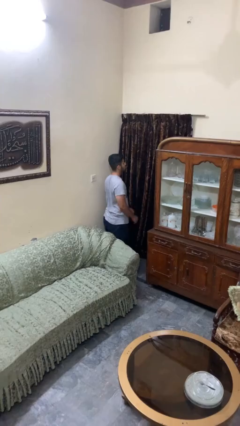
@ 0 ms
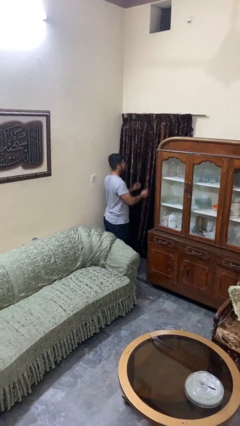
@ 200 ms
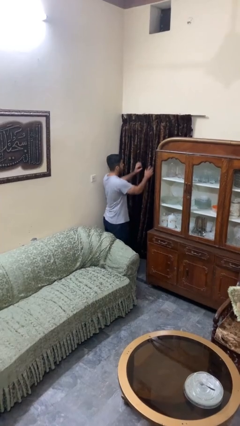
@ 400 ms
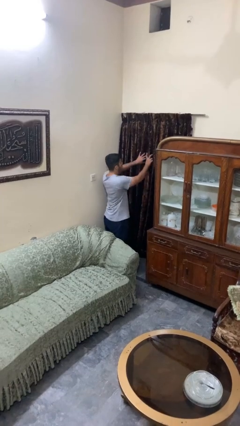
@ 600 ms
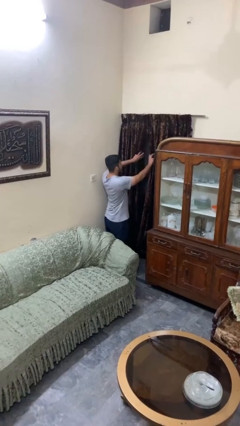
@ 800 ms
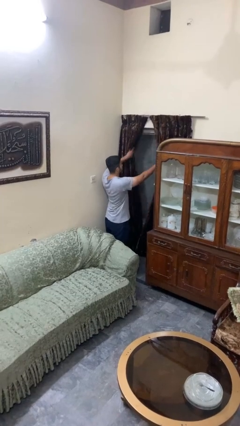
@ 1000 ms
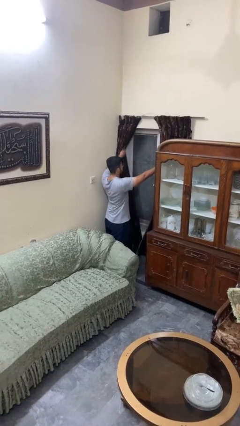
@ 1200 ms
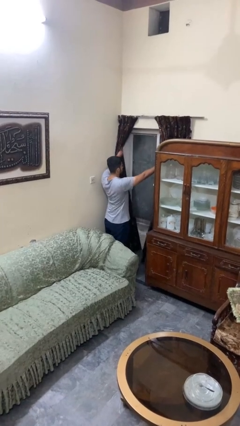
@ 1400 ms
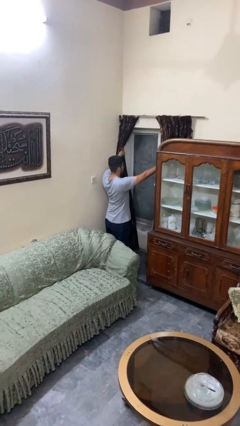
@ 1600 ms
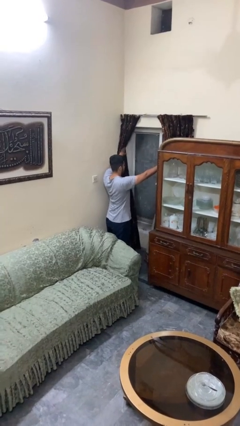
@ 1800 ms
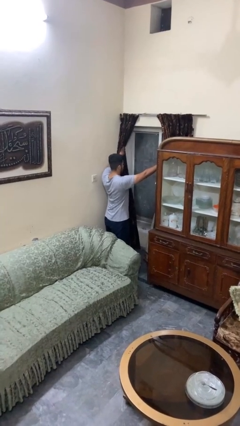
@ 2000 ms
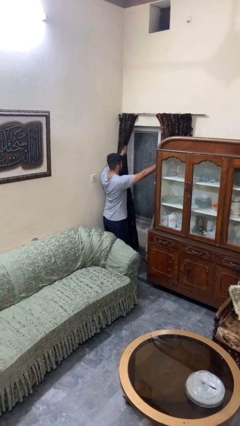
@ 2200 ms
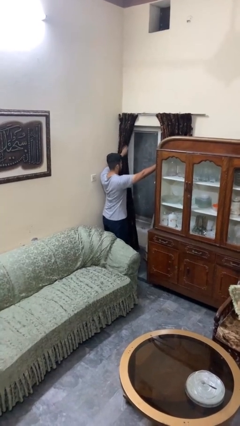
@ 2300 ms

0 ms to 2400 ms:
person opens curtains

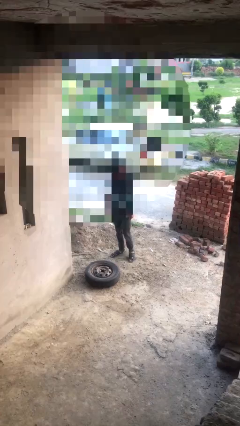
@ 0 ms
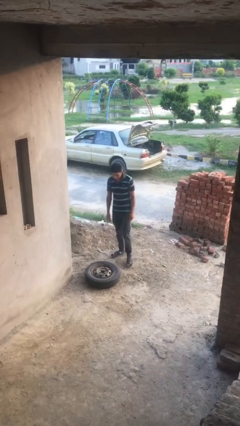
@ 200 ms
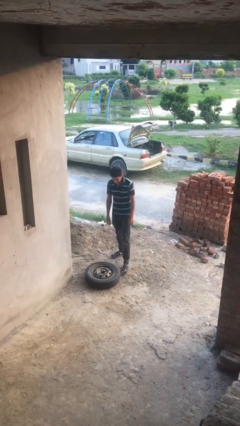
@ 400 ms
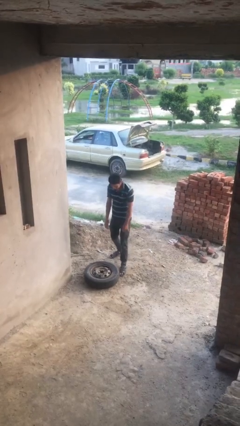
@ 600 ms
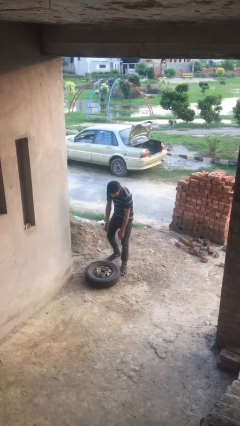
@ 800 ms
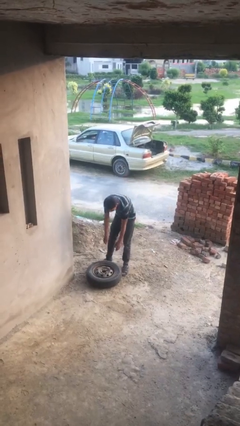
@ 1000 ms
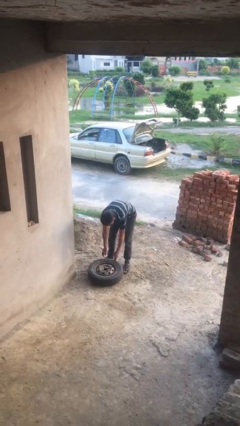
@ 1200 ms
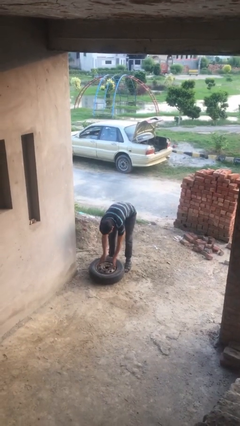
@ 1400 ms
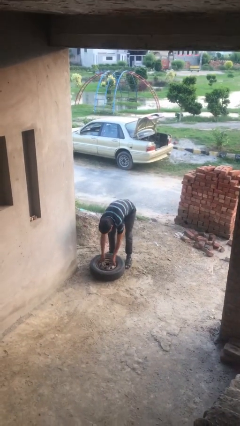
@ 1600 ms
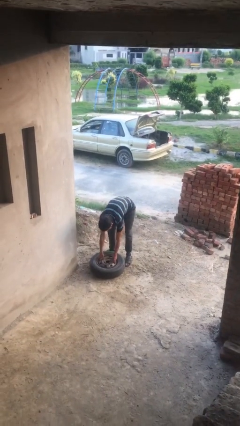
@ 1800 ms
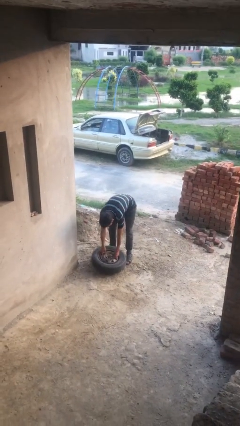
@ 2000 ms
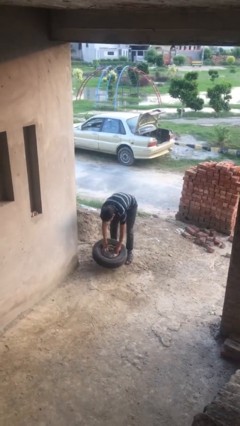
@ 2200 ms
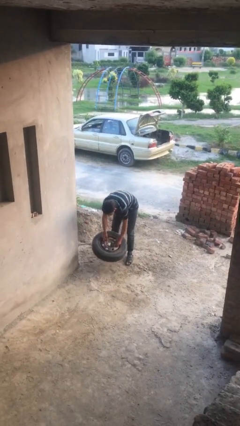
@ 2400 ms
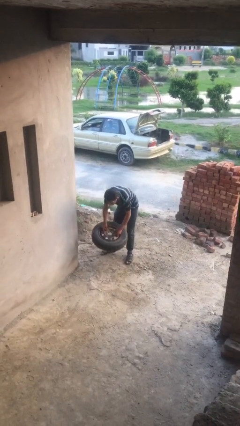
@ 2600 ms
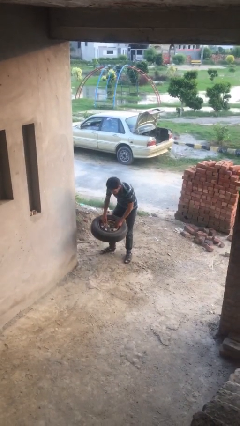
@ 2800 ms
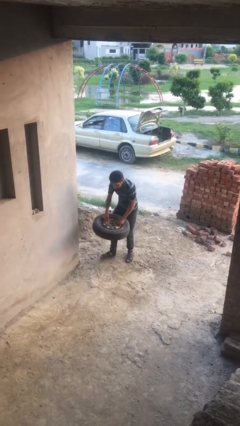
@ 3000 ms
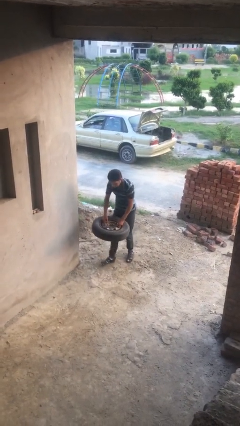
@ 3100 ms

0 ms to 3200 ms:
person picks up object from floor

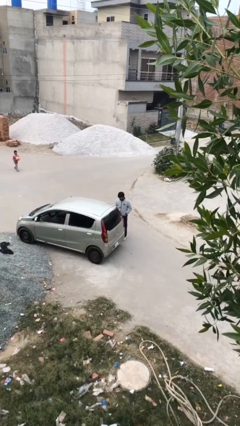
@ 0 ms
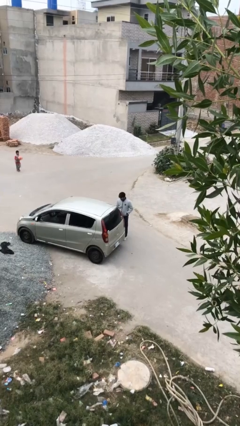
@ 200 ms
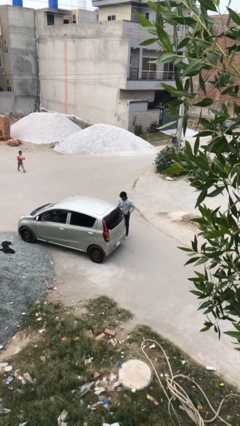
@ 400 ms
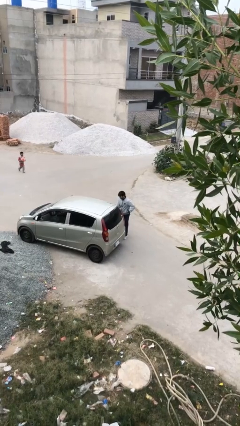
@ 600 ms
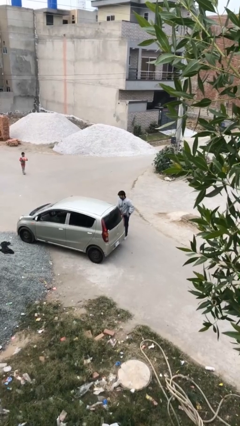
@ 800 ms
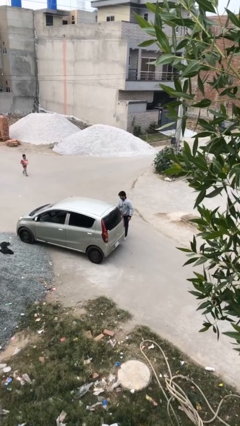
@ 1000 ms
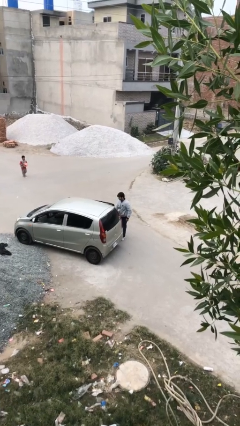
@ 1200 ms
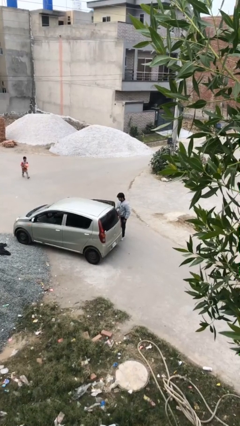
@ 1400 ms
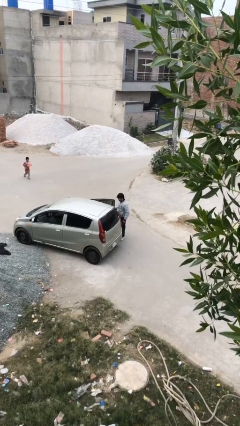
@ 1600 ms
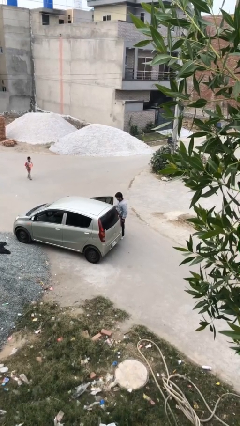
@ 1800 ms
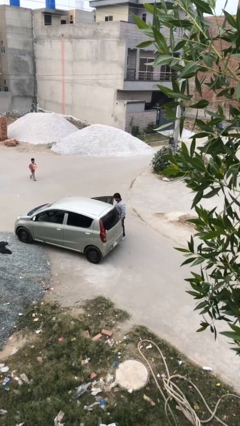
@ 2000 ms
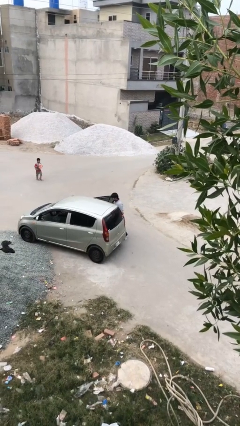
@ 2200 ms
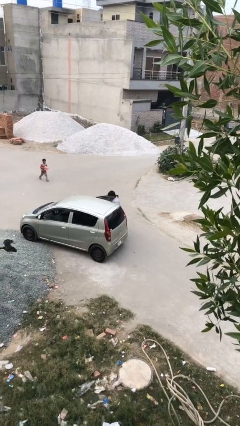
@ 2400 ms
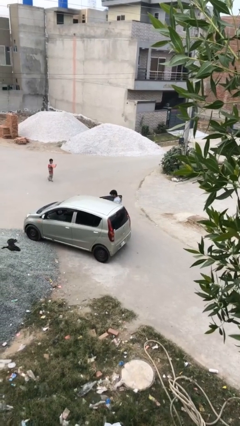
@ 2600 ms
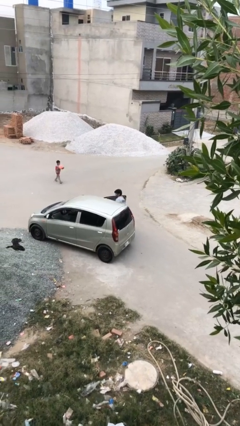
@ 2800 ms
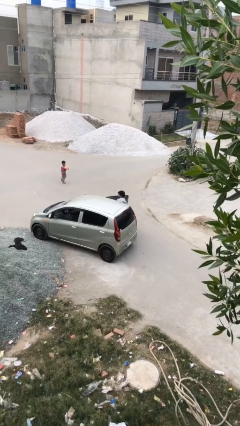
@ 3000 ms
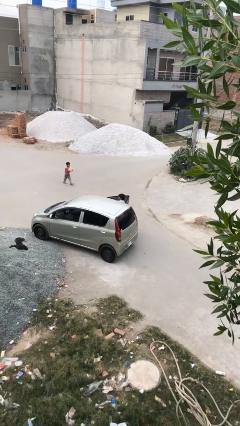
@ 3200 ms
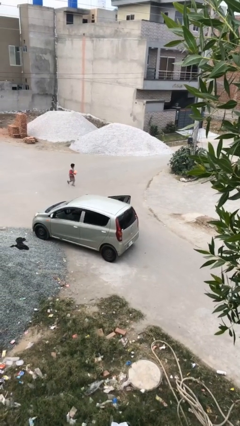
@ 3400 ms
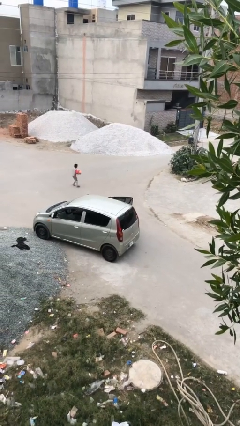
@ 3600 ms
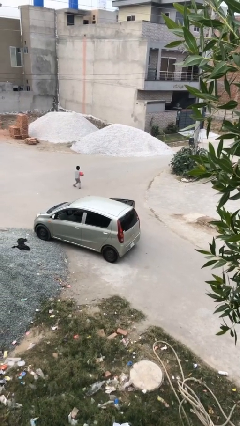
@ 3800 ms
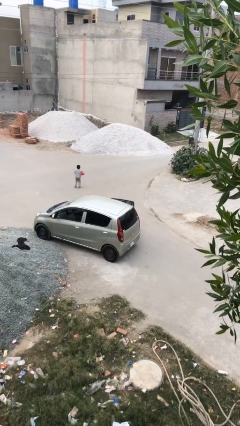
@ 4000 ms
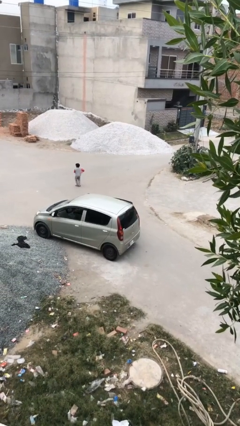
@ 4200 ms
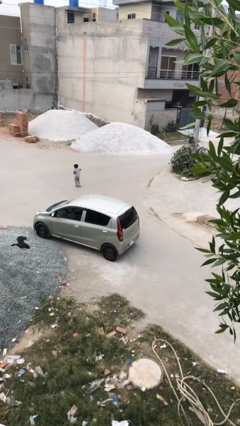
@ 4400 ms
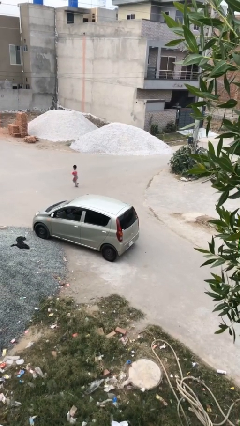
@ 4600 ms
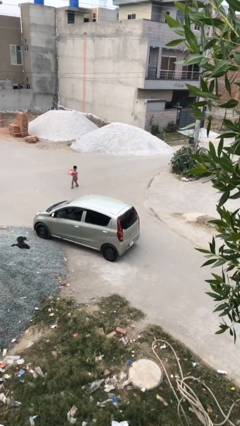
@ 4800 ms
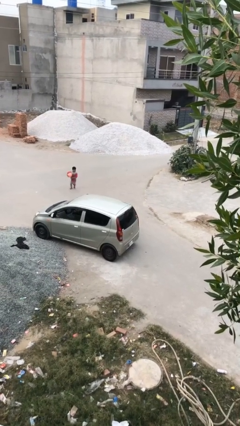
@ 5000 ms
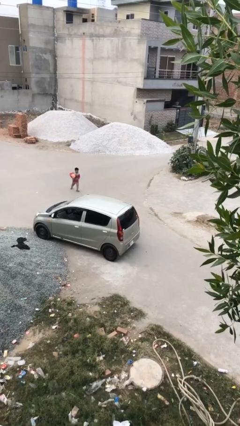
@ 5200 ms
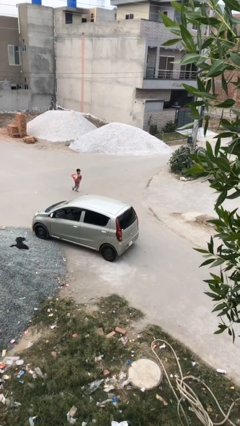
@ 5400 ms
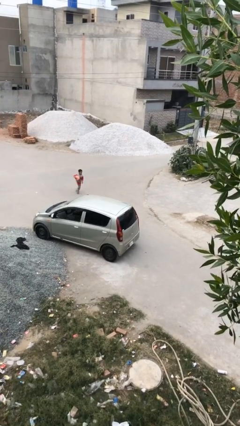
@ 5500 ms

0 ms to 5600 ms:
car picks up person

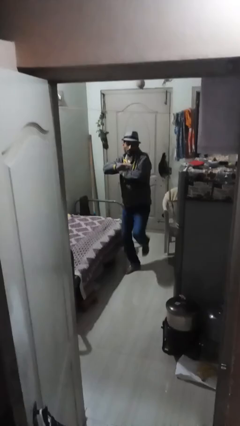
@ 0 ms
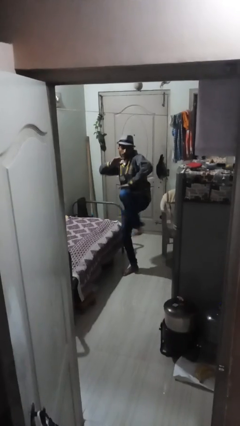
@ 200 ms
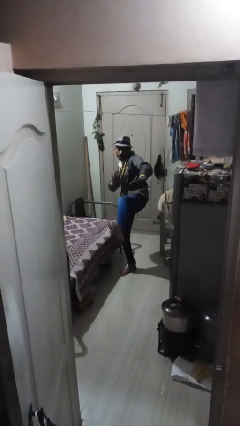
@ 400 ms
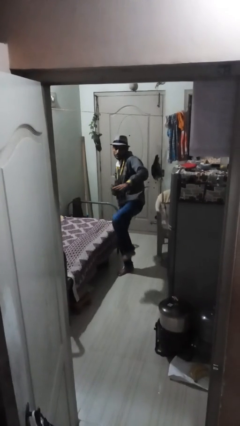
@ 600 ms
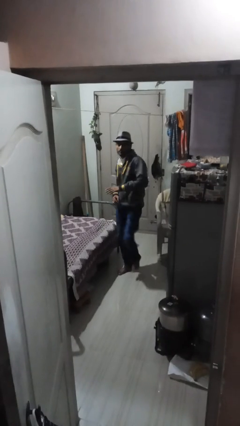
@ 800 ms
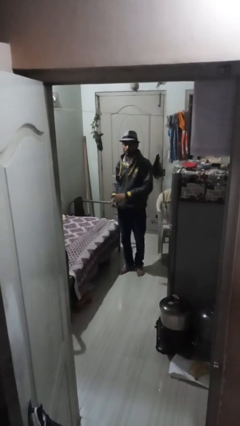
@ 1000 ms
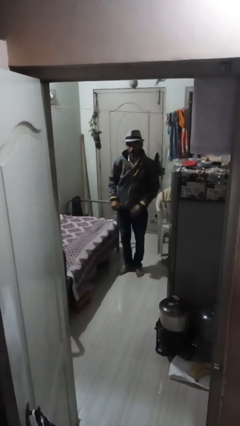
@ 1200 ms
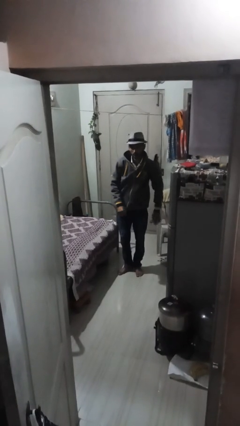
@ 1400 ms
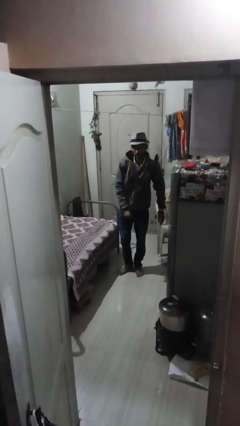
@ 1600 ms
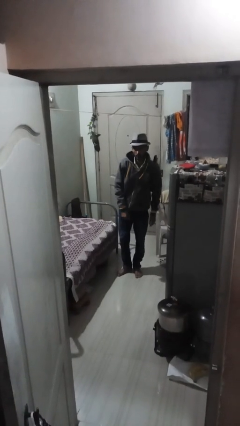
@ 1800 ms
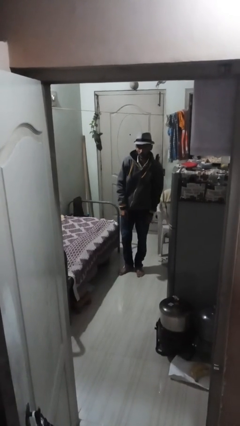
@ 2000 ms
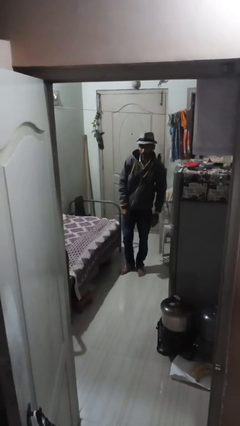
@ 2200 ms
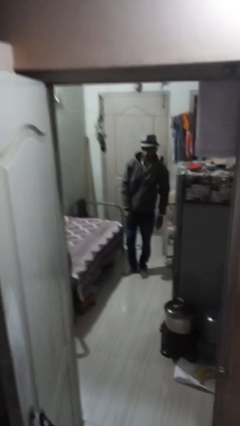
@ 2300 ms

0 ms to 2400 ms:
person karate kicks

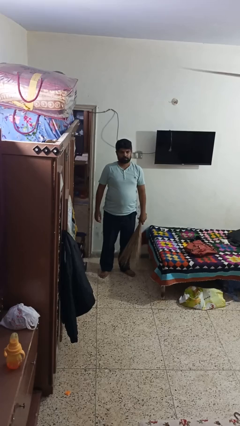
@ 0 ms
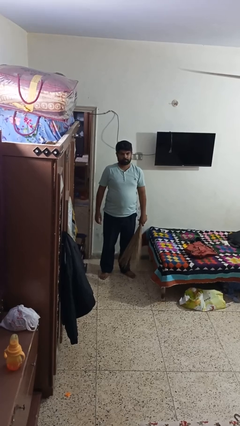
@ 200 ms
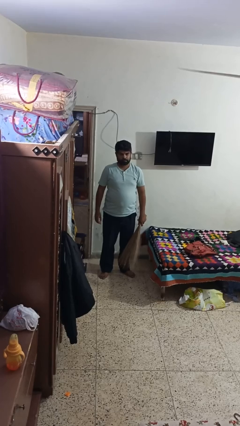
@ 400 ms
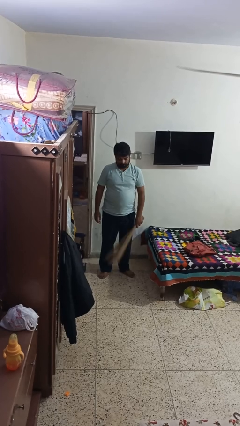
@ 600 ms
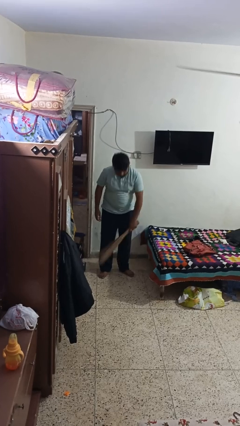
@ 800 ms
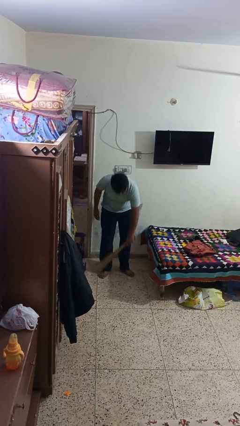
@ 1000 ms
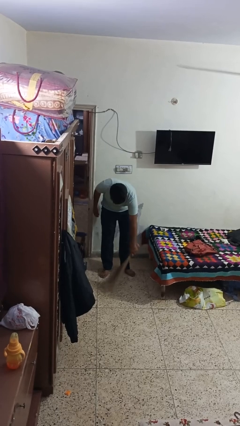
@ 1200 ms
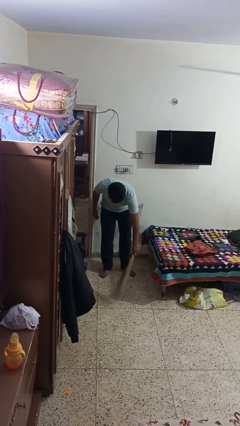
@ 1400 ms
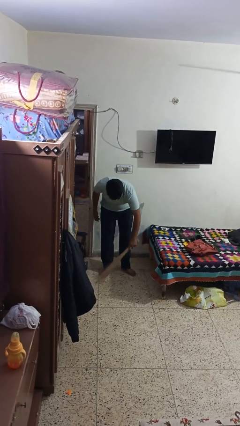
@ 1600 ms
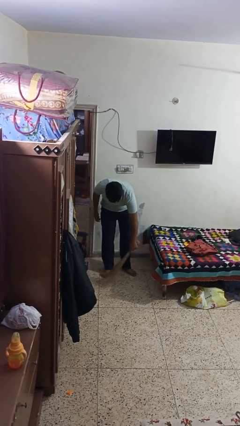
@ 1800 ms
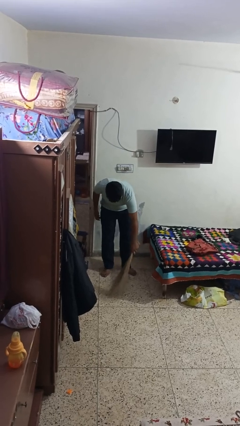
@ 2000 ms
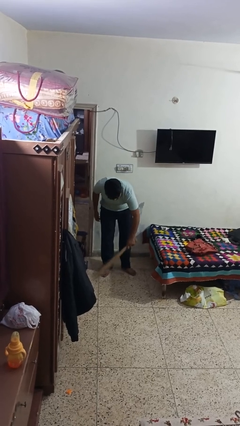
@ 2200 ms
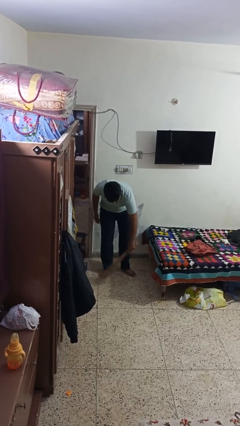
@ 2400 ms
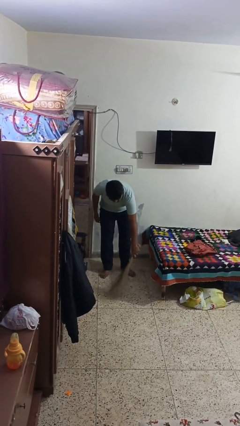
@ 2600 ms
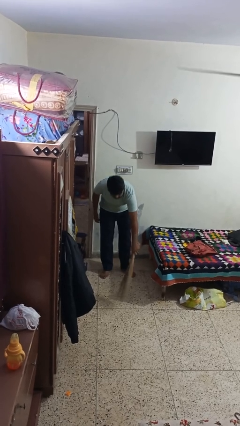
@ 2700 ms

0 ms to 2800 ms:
person sweeps floor

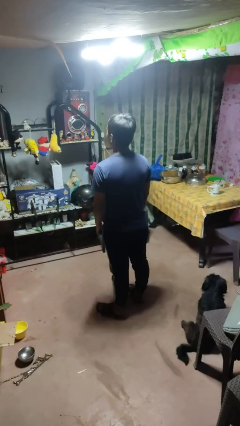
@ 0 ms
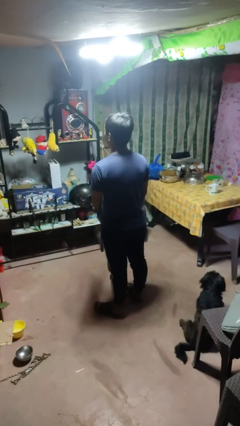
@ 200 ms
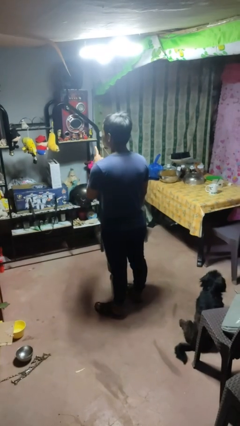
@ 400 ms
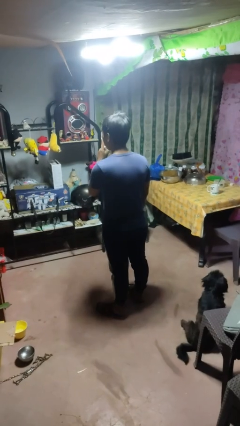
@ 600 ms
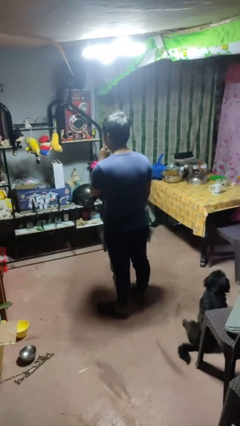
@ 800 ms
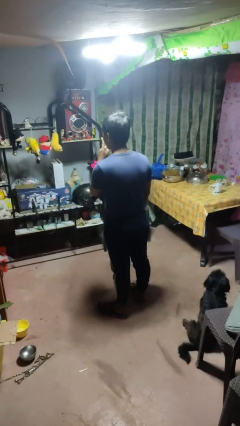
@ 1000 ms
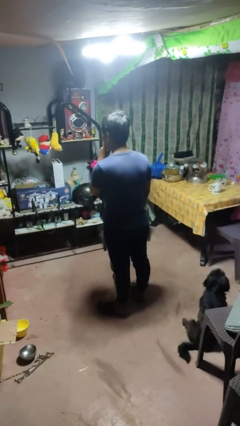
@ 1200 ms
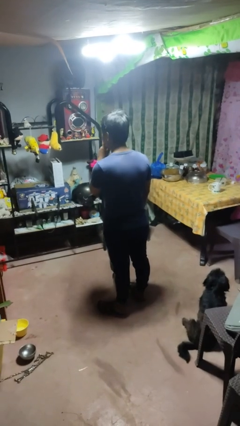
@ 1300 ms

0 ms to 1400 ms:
person gestures be quiet
